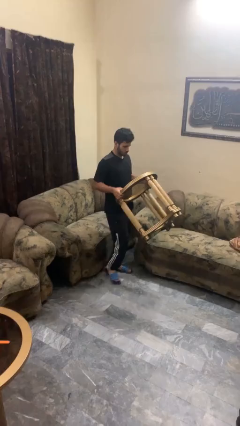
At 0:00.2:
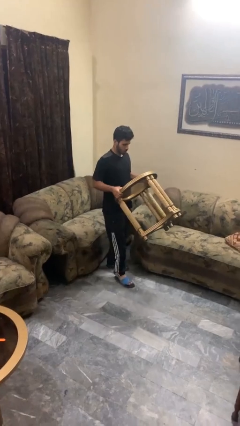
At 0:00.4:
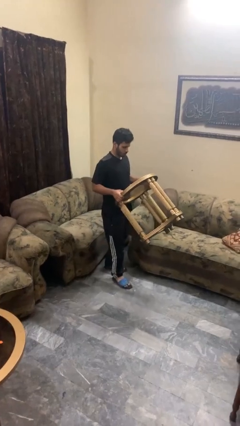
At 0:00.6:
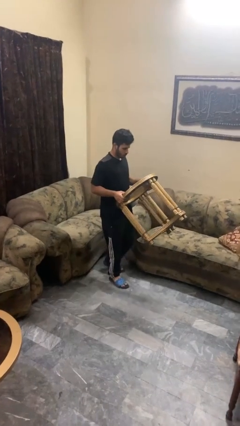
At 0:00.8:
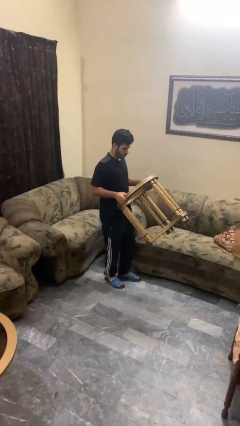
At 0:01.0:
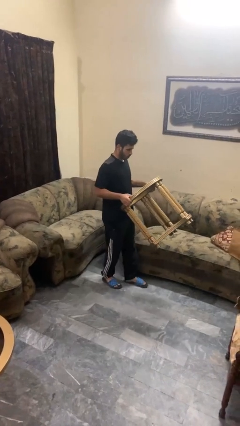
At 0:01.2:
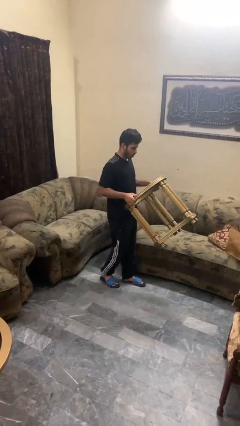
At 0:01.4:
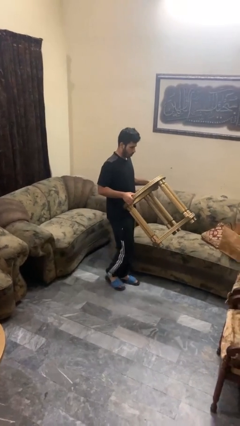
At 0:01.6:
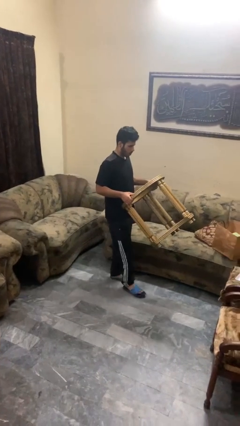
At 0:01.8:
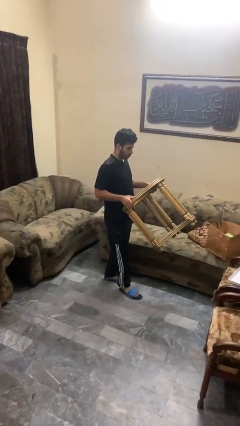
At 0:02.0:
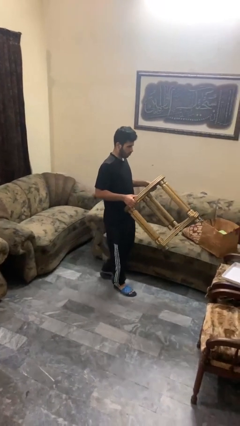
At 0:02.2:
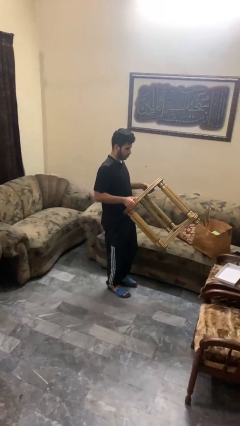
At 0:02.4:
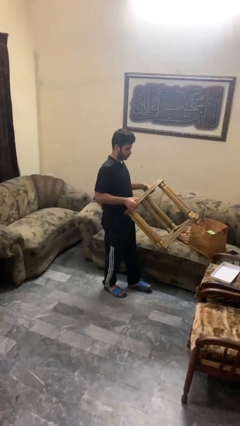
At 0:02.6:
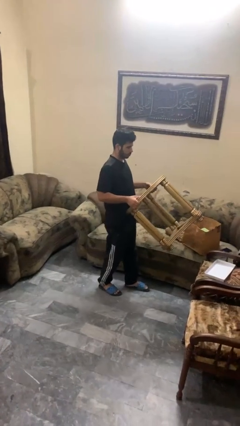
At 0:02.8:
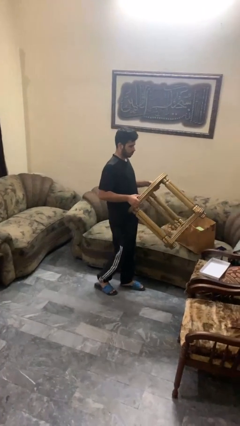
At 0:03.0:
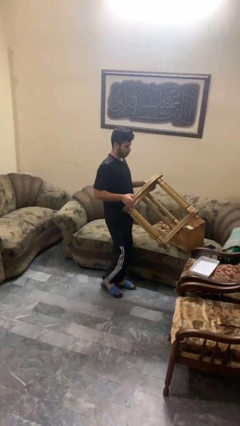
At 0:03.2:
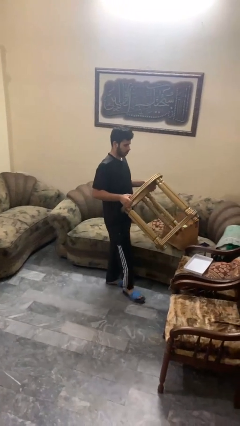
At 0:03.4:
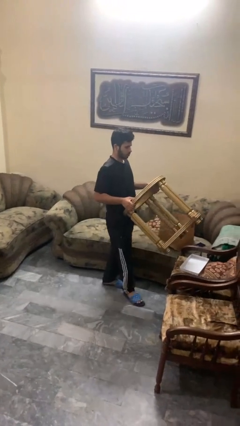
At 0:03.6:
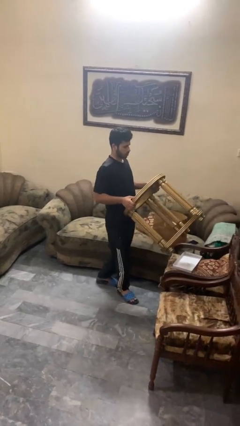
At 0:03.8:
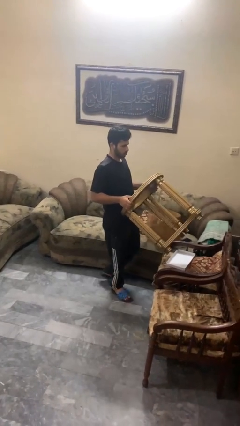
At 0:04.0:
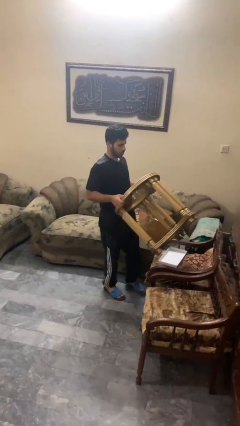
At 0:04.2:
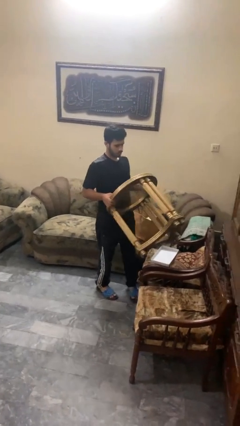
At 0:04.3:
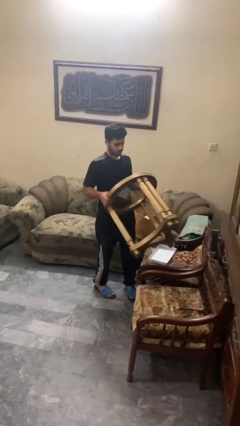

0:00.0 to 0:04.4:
person carries furniture

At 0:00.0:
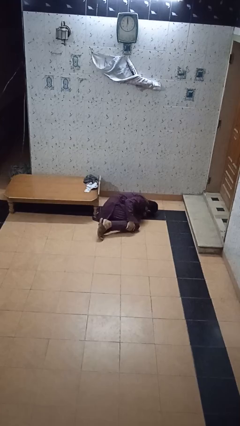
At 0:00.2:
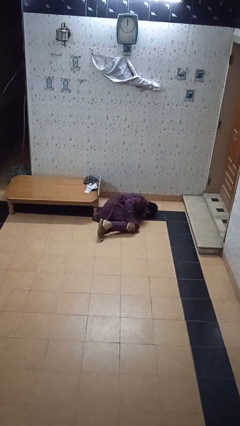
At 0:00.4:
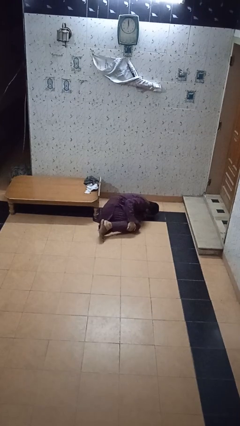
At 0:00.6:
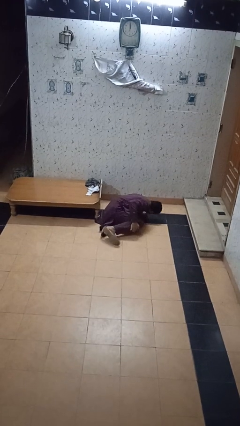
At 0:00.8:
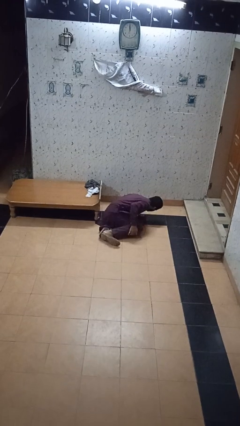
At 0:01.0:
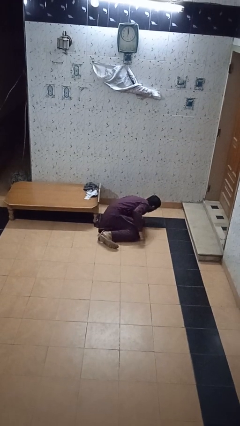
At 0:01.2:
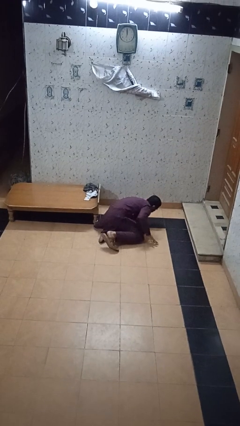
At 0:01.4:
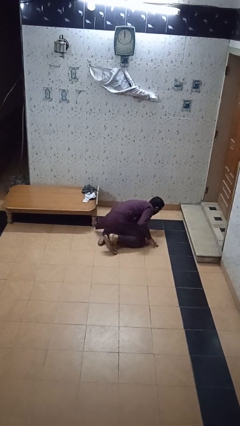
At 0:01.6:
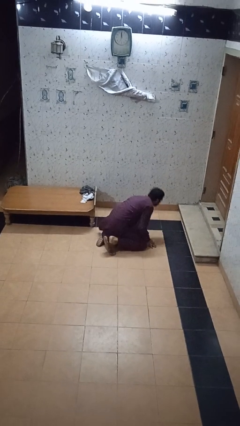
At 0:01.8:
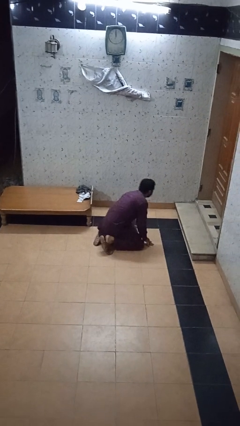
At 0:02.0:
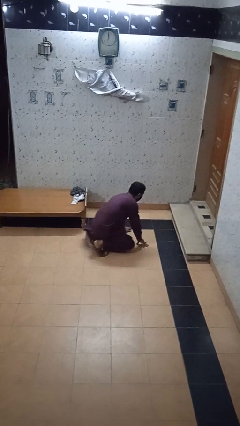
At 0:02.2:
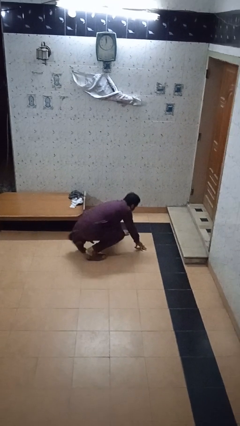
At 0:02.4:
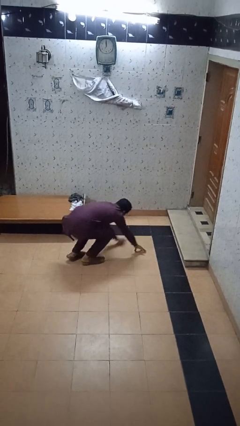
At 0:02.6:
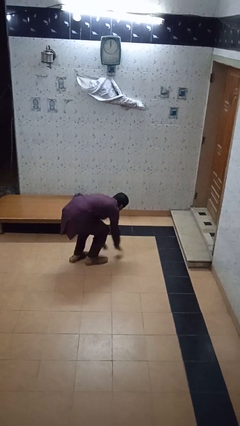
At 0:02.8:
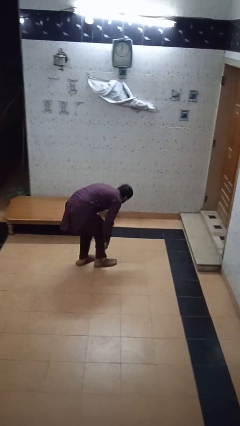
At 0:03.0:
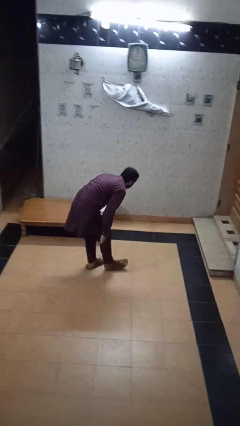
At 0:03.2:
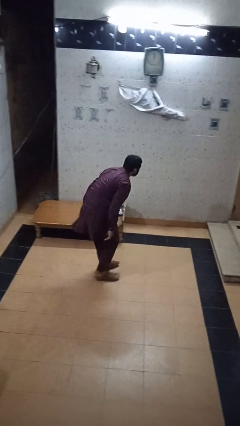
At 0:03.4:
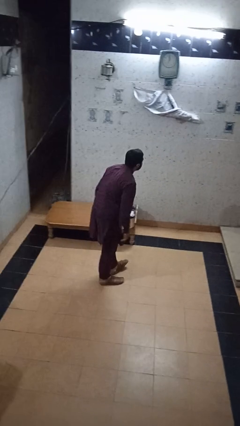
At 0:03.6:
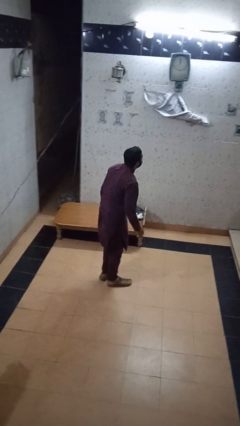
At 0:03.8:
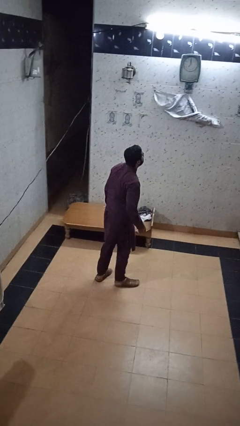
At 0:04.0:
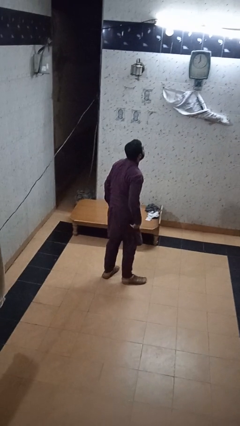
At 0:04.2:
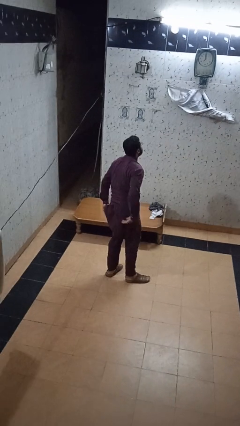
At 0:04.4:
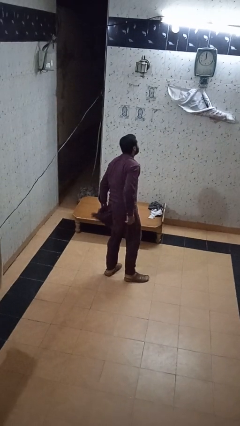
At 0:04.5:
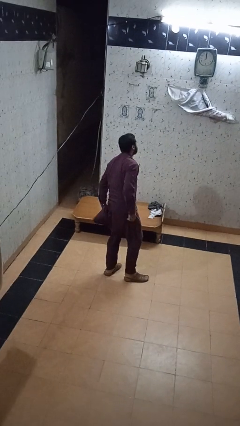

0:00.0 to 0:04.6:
person stands up from floor

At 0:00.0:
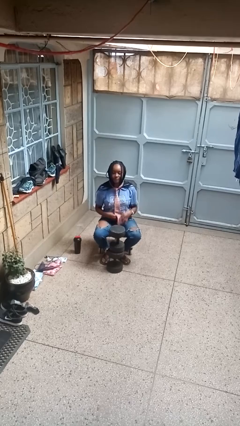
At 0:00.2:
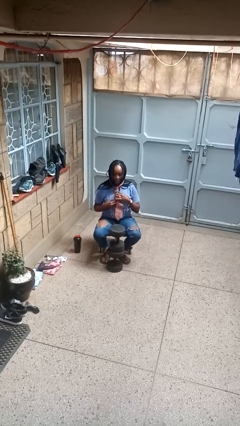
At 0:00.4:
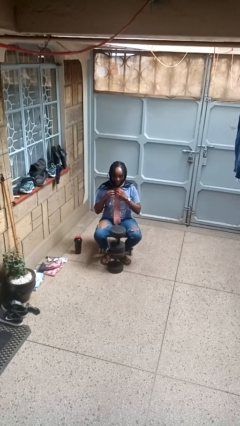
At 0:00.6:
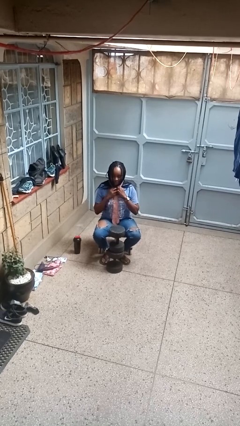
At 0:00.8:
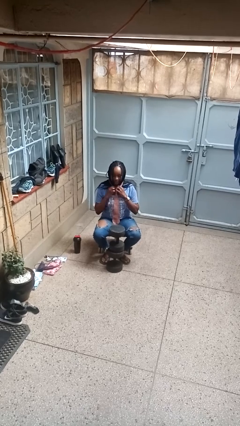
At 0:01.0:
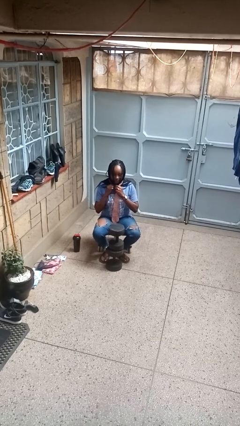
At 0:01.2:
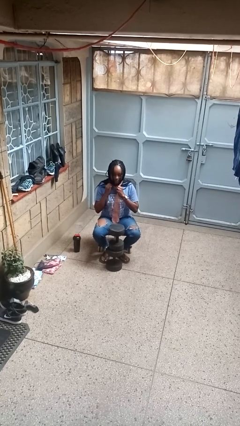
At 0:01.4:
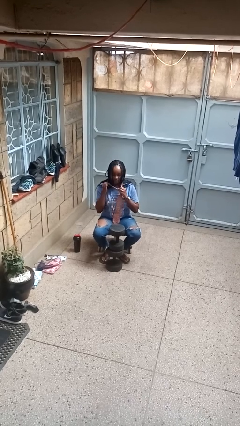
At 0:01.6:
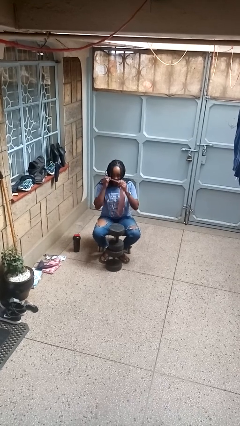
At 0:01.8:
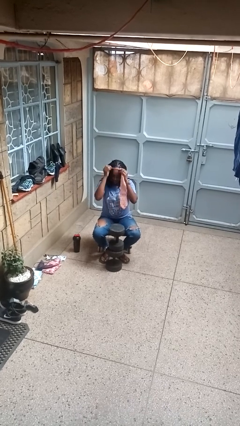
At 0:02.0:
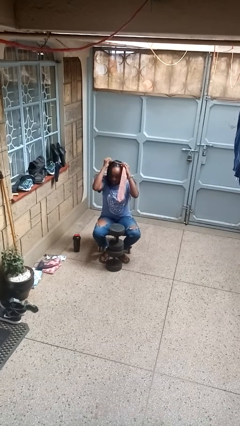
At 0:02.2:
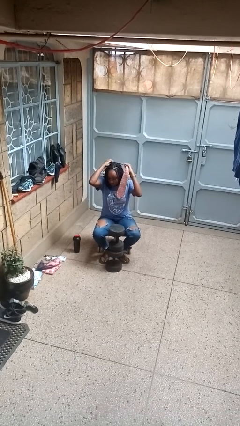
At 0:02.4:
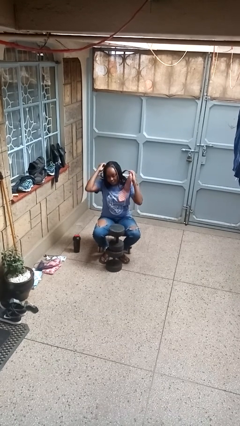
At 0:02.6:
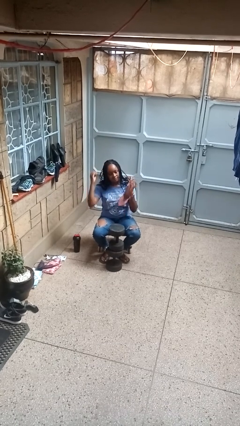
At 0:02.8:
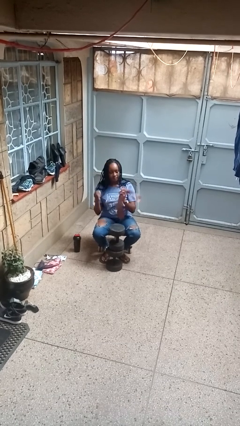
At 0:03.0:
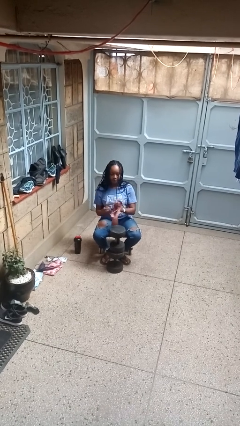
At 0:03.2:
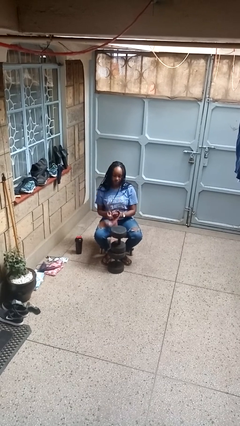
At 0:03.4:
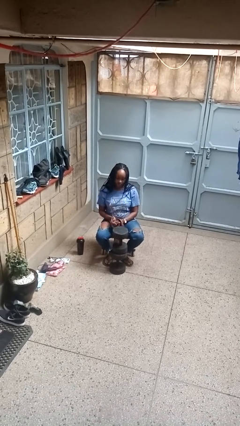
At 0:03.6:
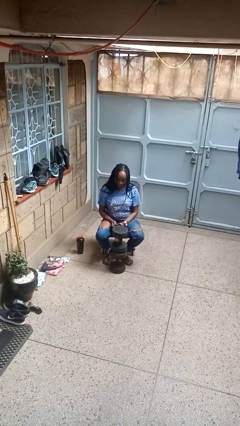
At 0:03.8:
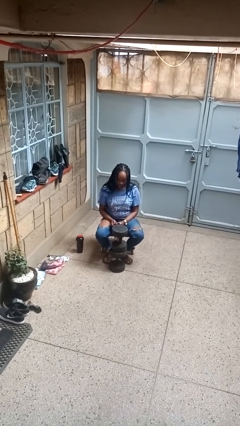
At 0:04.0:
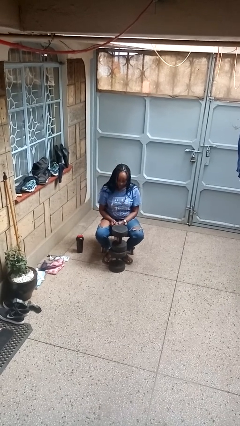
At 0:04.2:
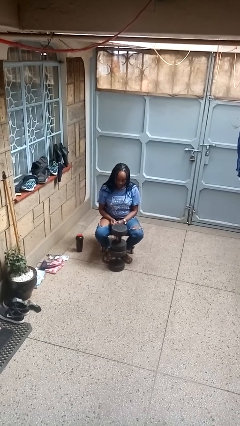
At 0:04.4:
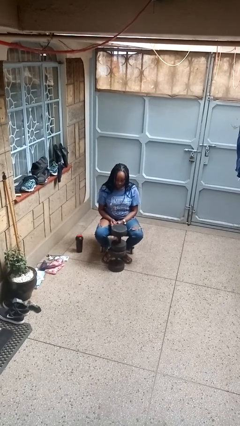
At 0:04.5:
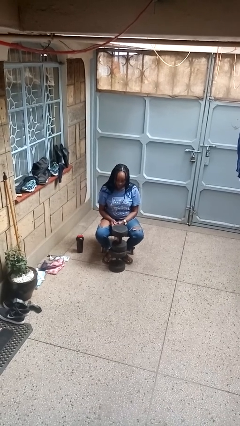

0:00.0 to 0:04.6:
person takes off necktie

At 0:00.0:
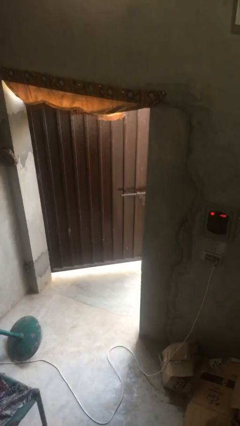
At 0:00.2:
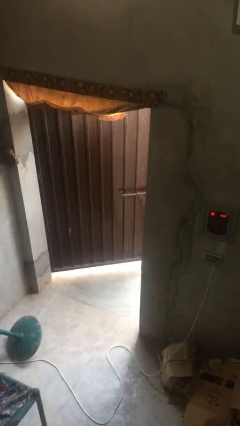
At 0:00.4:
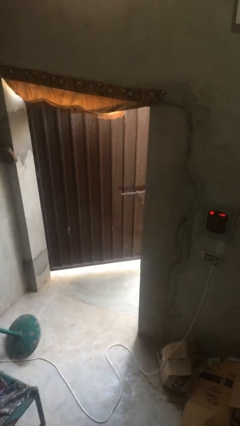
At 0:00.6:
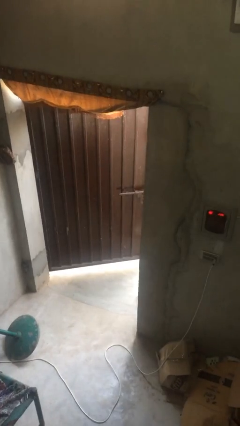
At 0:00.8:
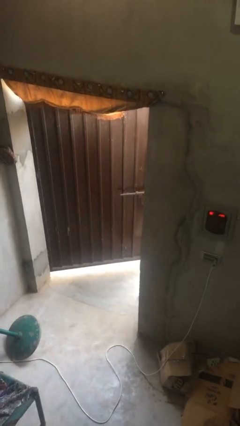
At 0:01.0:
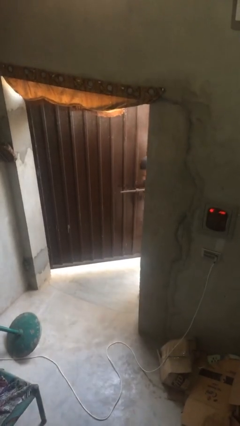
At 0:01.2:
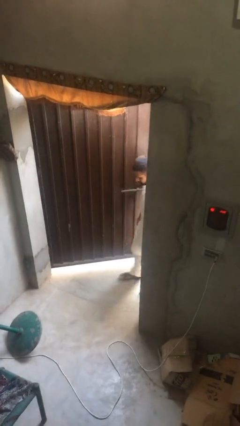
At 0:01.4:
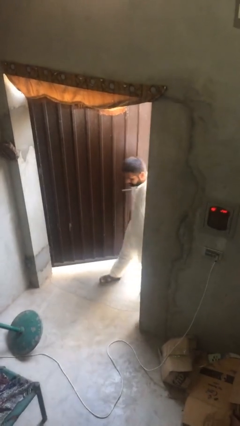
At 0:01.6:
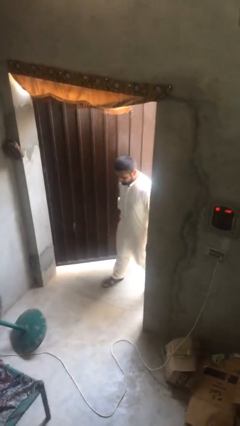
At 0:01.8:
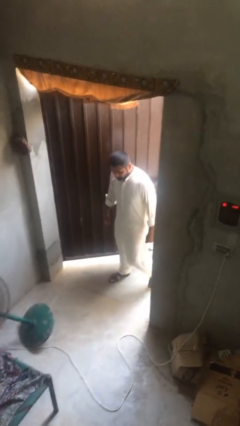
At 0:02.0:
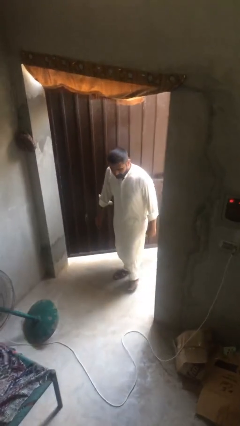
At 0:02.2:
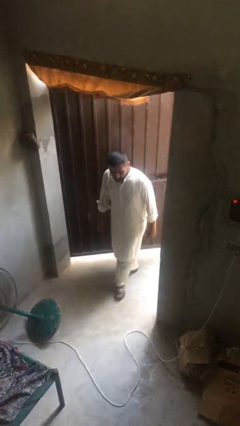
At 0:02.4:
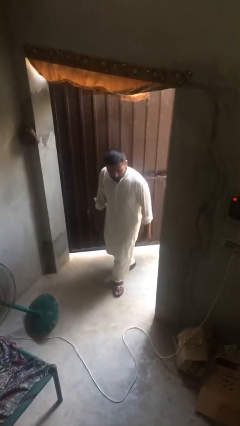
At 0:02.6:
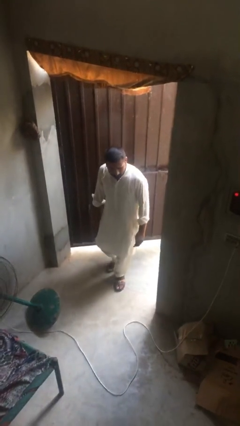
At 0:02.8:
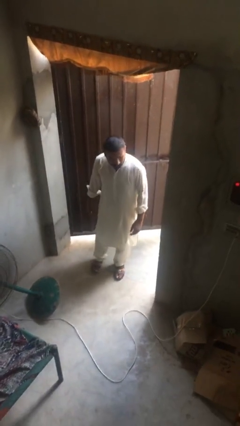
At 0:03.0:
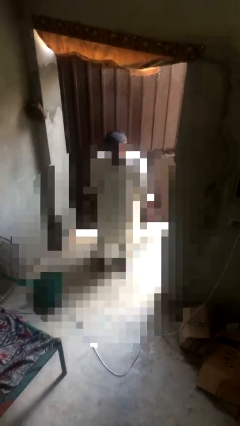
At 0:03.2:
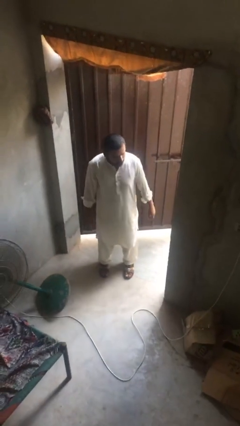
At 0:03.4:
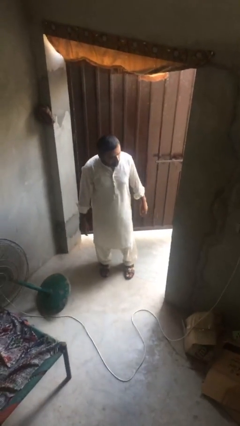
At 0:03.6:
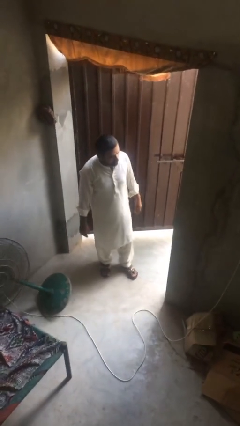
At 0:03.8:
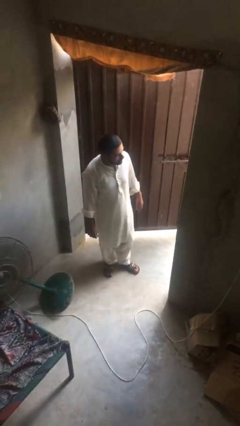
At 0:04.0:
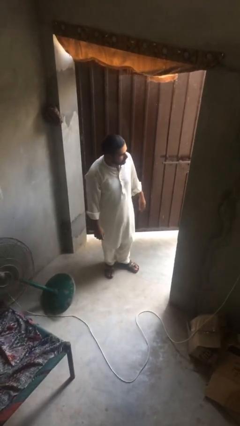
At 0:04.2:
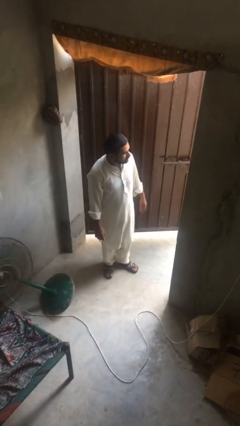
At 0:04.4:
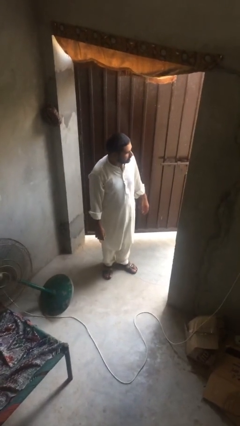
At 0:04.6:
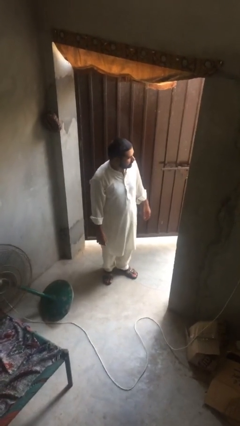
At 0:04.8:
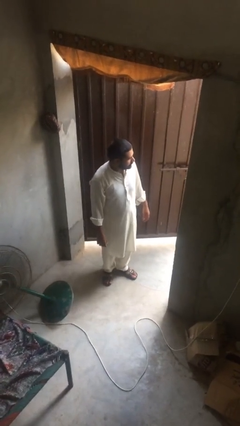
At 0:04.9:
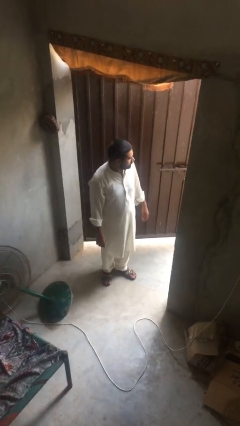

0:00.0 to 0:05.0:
person enters scene through structure
